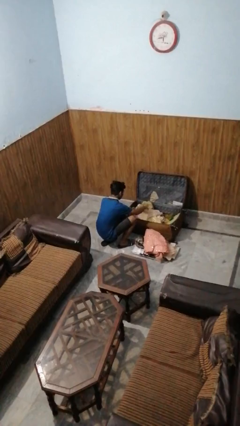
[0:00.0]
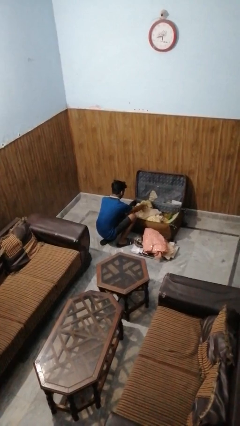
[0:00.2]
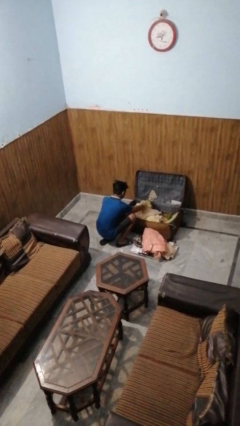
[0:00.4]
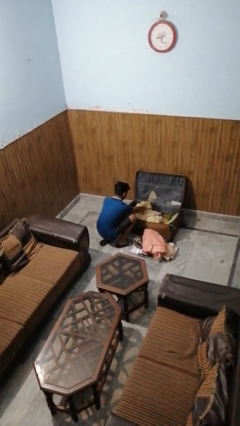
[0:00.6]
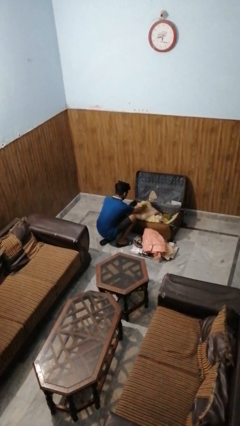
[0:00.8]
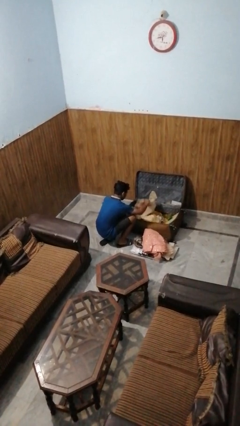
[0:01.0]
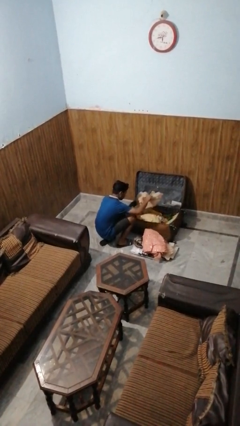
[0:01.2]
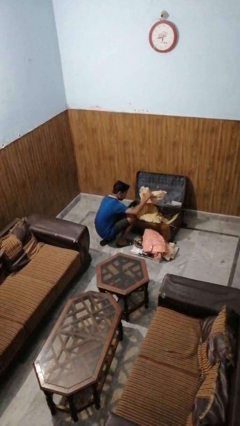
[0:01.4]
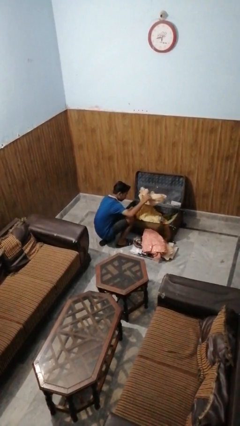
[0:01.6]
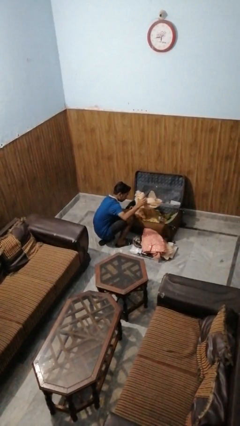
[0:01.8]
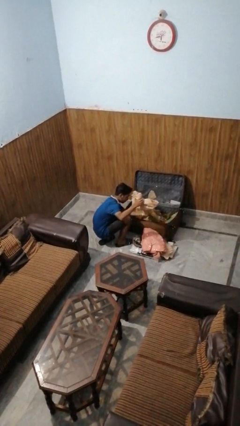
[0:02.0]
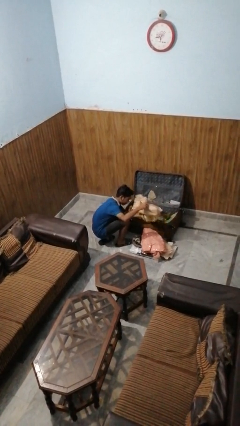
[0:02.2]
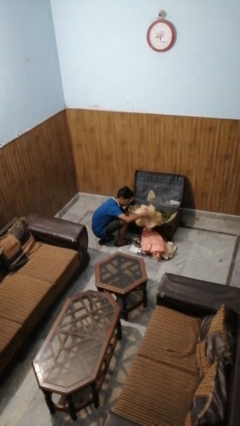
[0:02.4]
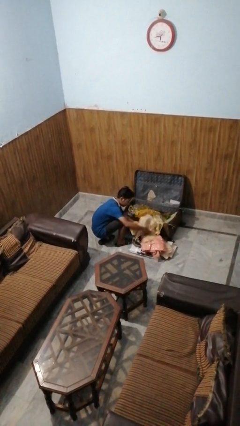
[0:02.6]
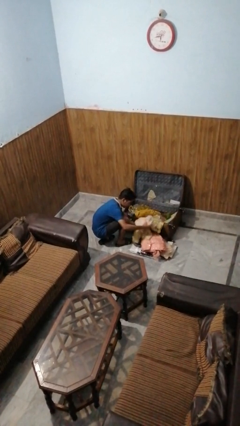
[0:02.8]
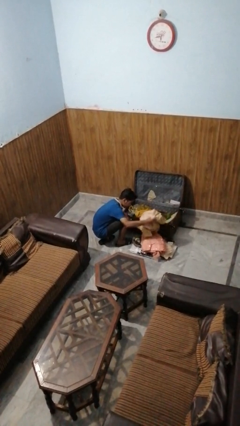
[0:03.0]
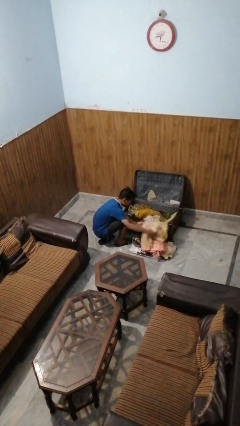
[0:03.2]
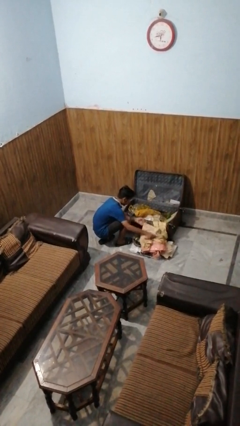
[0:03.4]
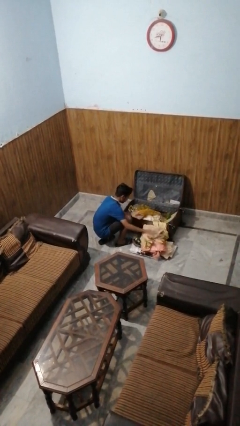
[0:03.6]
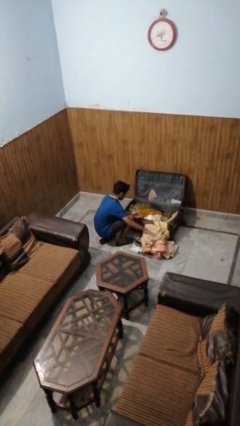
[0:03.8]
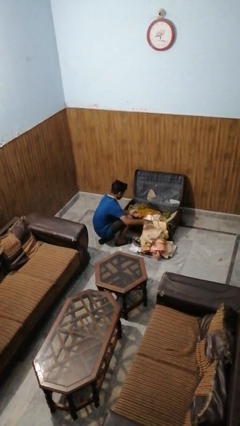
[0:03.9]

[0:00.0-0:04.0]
person unloads clothes from suitcase

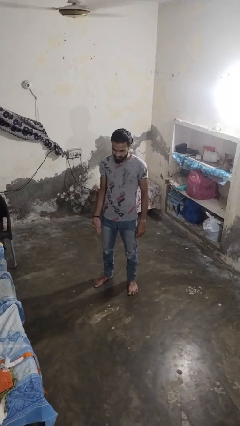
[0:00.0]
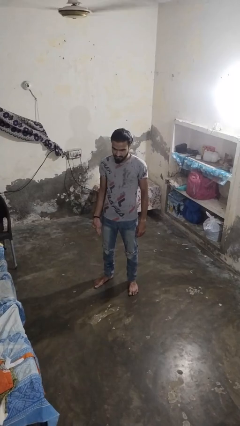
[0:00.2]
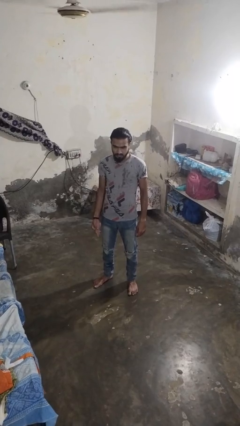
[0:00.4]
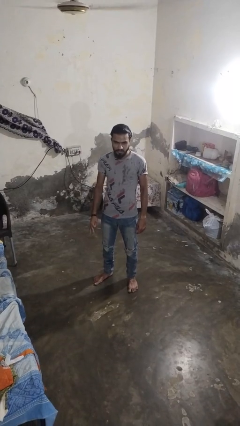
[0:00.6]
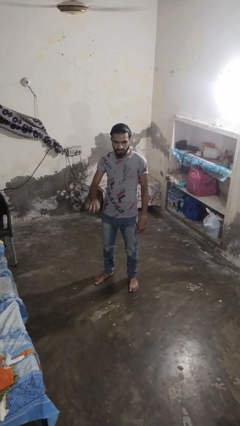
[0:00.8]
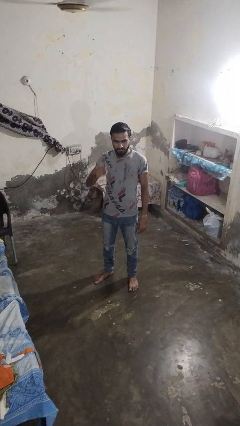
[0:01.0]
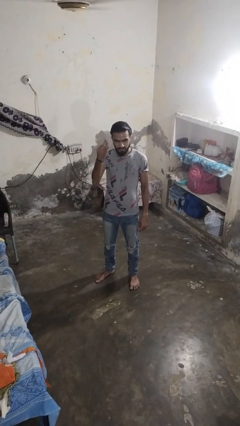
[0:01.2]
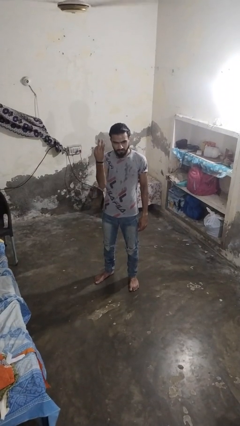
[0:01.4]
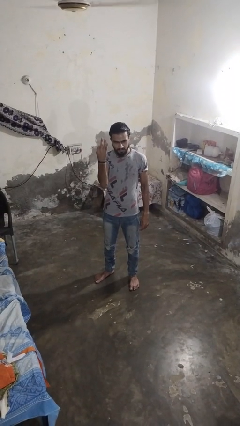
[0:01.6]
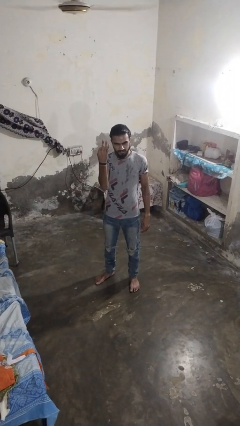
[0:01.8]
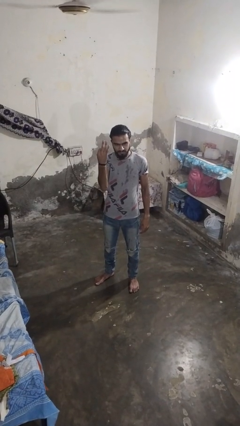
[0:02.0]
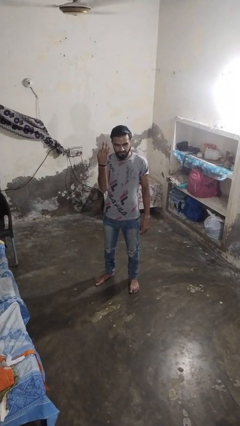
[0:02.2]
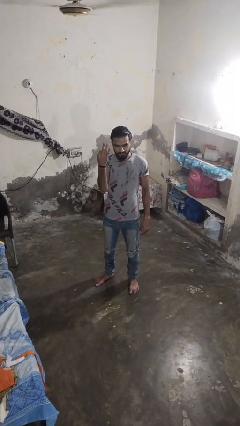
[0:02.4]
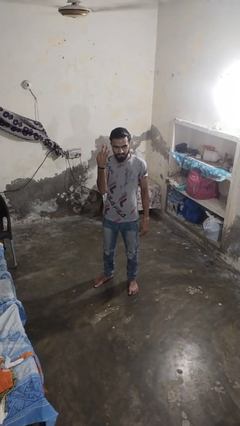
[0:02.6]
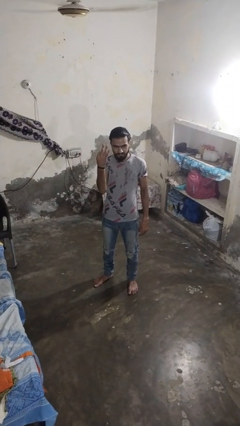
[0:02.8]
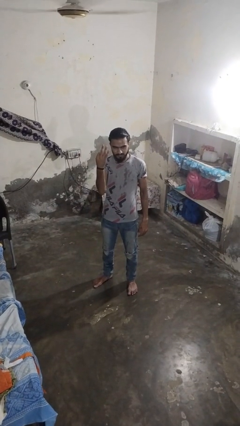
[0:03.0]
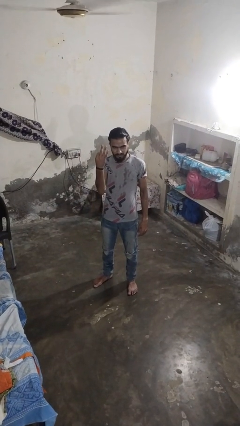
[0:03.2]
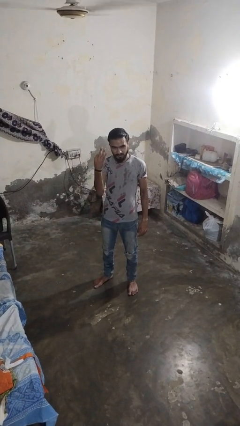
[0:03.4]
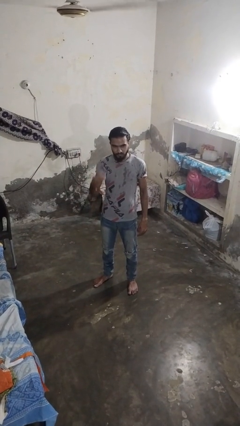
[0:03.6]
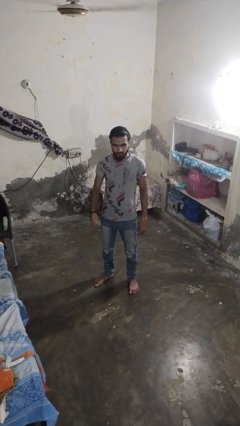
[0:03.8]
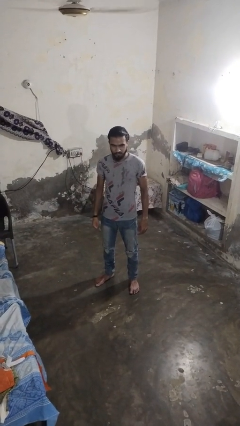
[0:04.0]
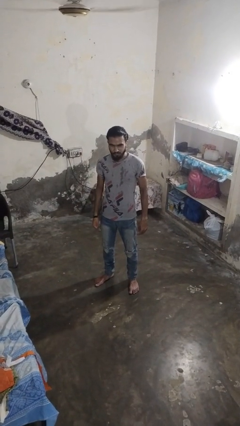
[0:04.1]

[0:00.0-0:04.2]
person gestures number three

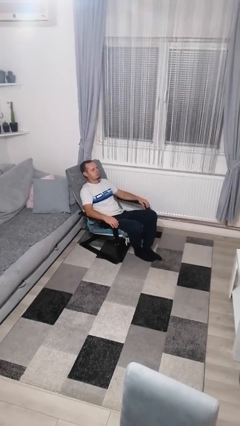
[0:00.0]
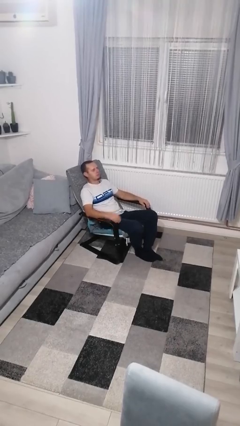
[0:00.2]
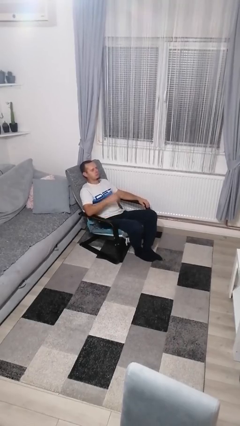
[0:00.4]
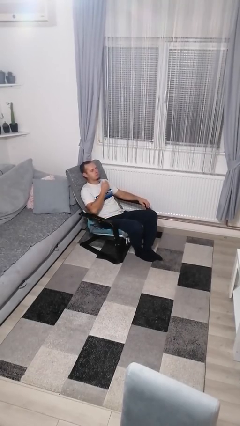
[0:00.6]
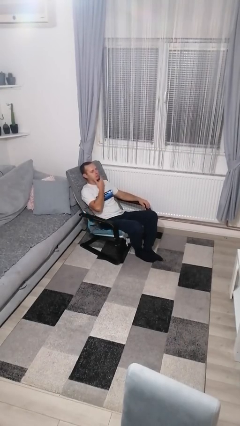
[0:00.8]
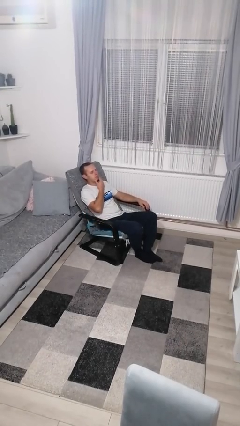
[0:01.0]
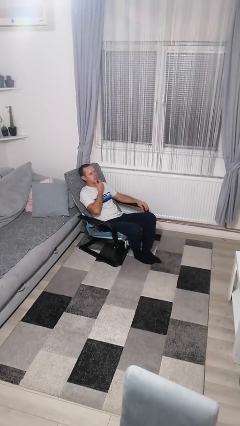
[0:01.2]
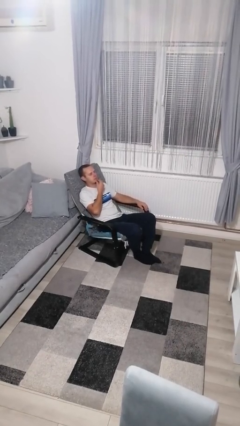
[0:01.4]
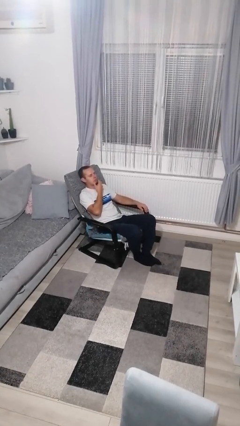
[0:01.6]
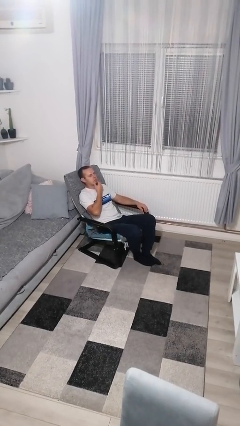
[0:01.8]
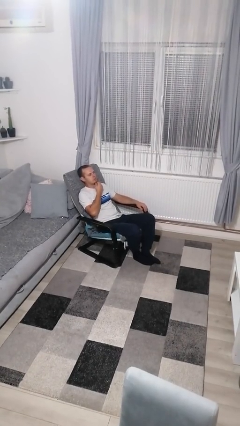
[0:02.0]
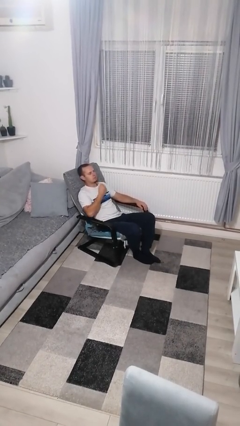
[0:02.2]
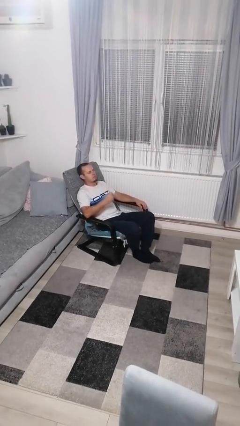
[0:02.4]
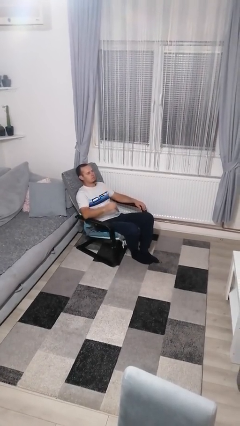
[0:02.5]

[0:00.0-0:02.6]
person strokes chin

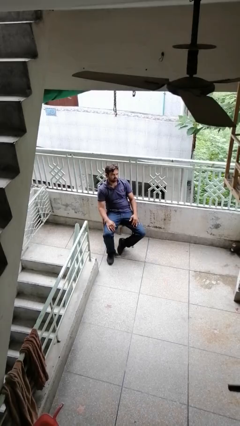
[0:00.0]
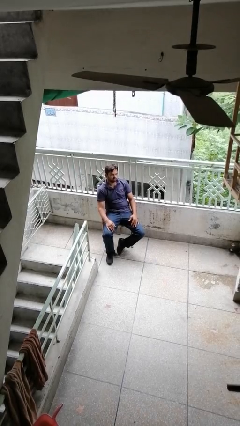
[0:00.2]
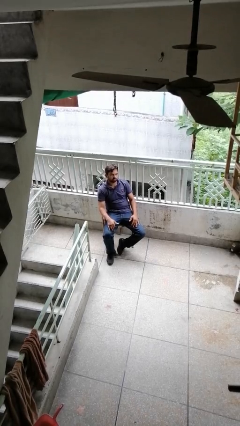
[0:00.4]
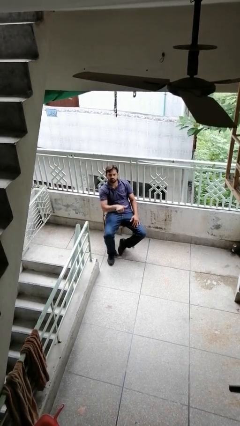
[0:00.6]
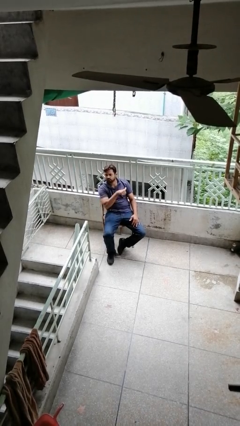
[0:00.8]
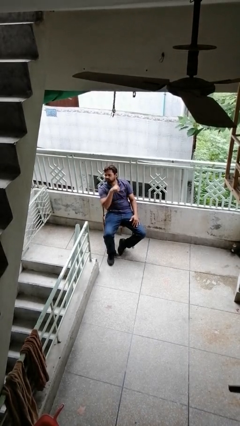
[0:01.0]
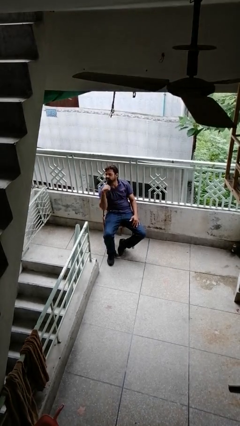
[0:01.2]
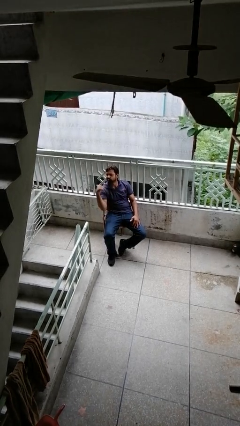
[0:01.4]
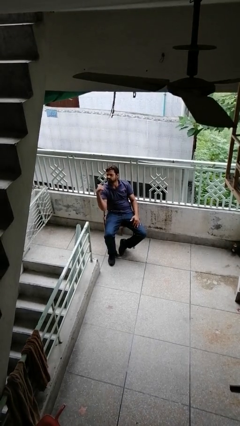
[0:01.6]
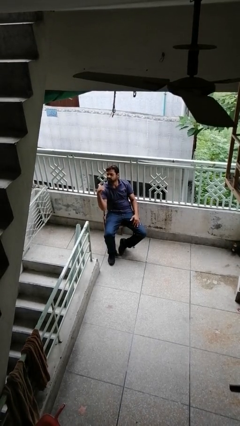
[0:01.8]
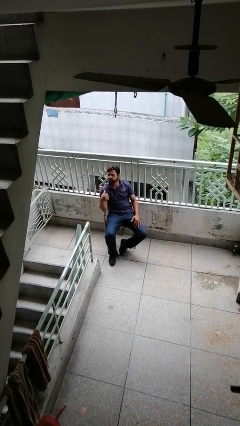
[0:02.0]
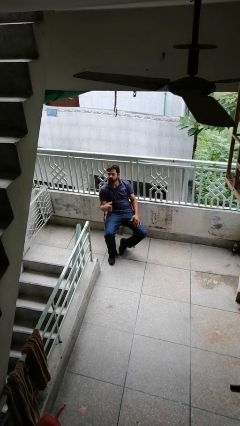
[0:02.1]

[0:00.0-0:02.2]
person gestures cut

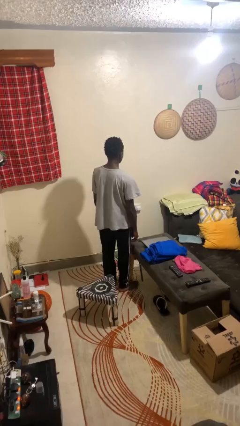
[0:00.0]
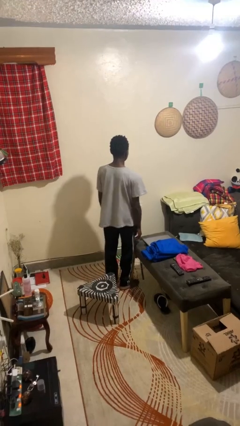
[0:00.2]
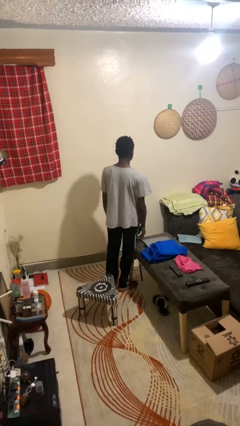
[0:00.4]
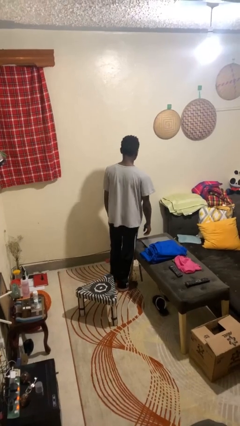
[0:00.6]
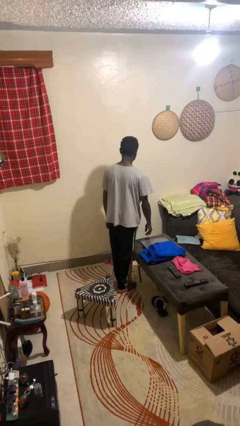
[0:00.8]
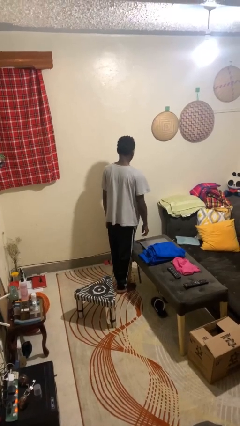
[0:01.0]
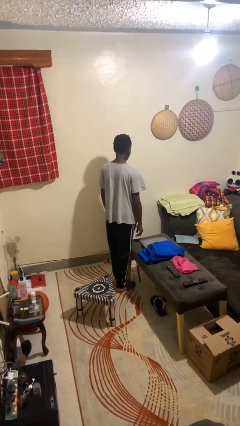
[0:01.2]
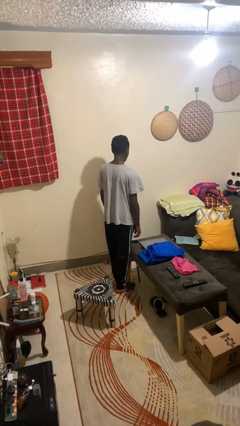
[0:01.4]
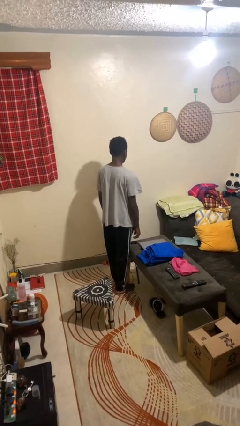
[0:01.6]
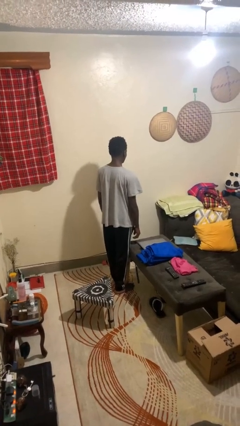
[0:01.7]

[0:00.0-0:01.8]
person bumps into table

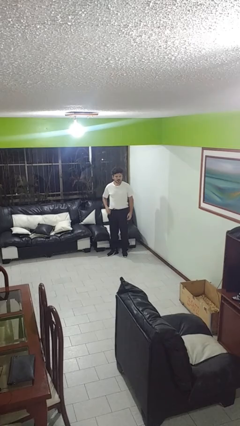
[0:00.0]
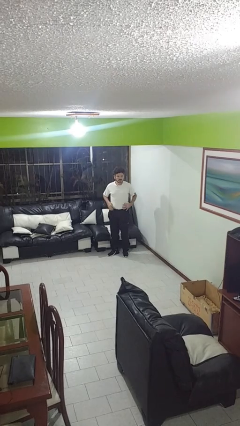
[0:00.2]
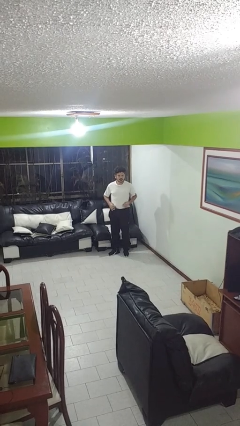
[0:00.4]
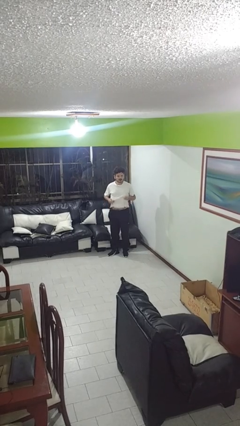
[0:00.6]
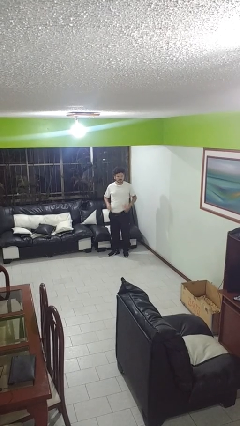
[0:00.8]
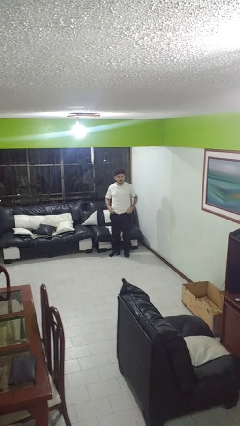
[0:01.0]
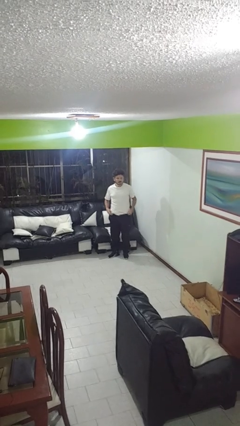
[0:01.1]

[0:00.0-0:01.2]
person untucks shirt

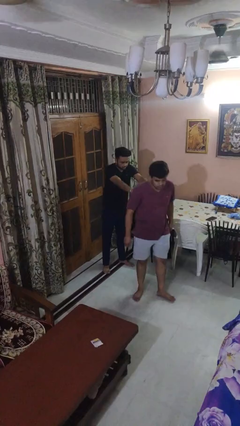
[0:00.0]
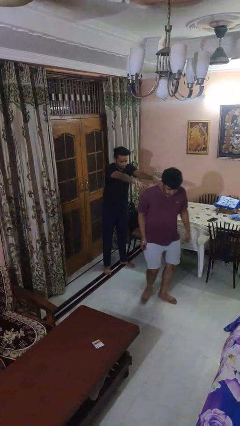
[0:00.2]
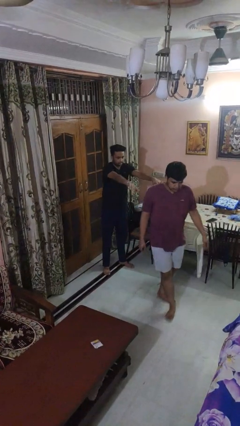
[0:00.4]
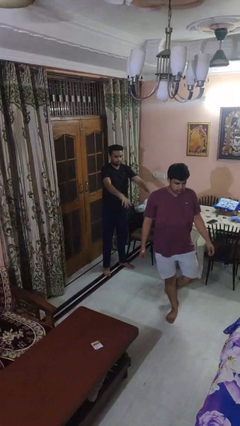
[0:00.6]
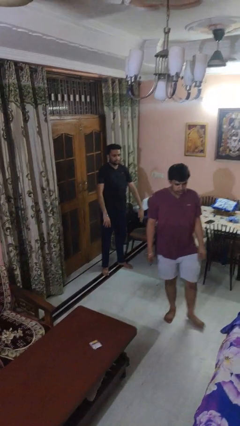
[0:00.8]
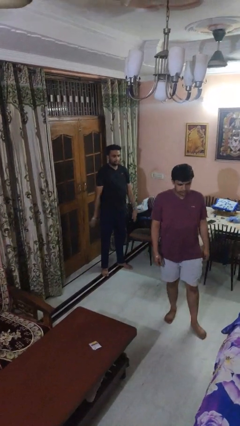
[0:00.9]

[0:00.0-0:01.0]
person shoves person
